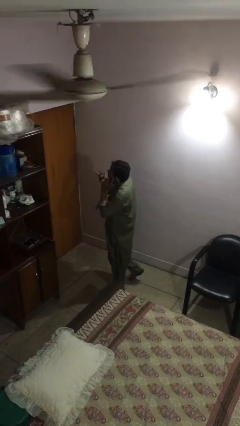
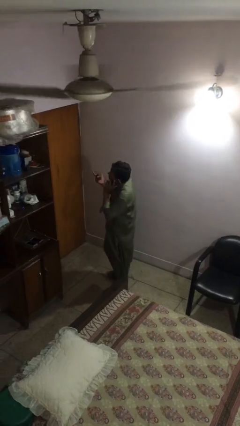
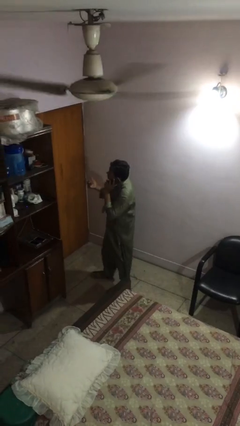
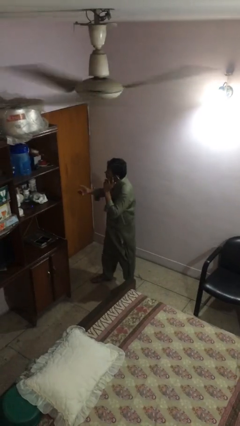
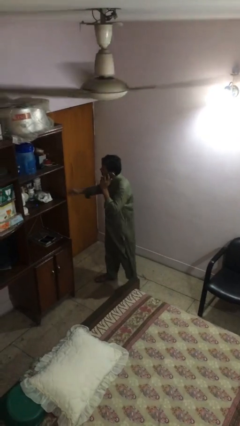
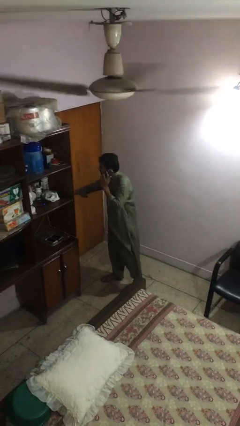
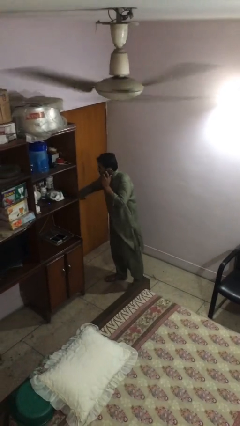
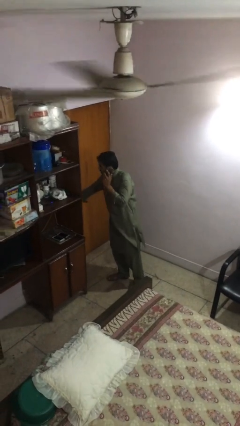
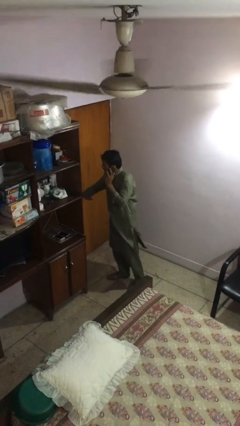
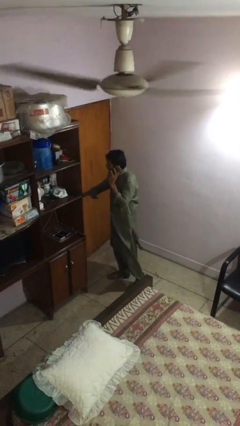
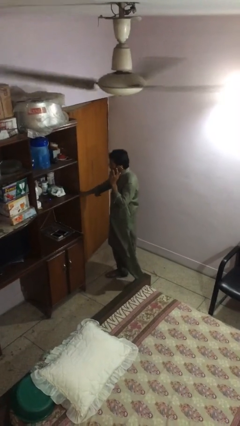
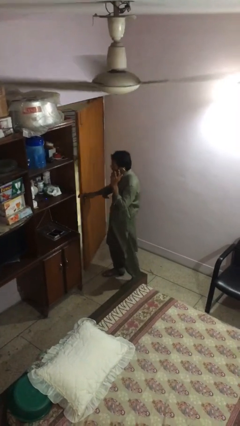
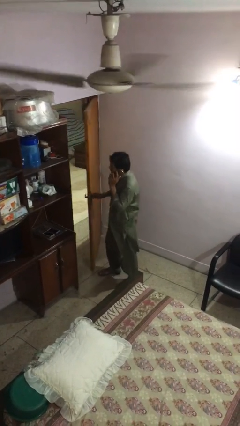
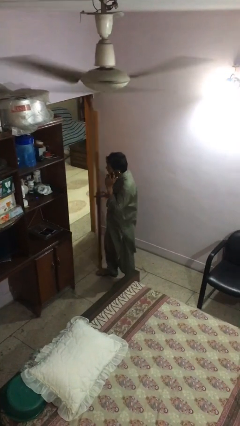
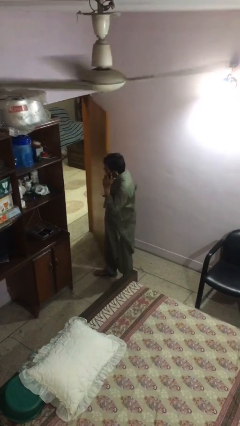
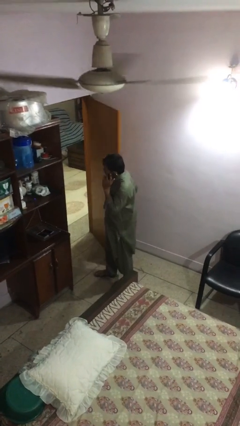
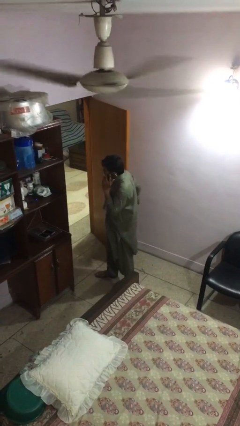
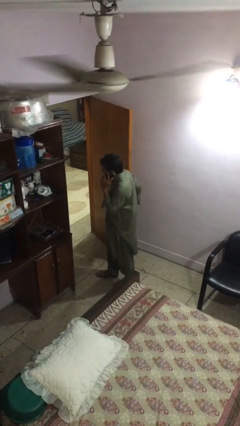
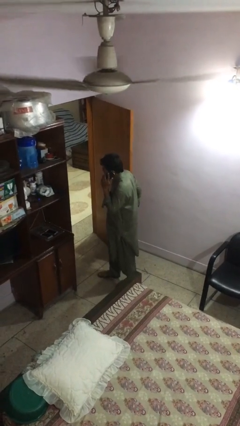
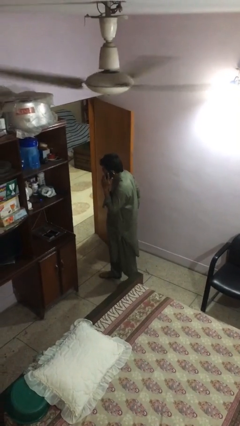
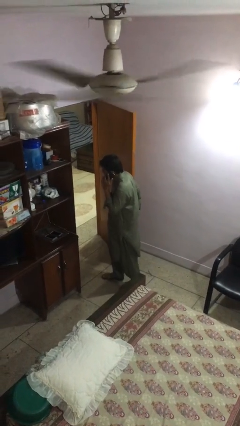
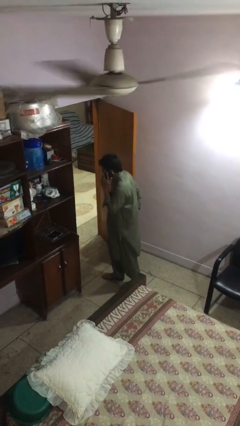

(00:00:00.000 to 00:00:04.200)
person opens facility door

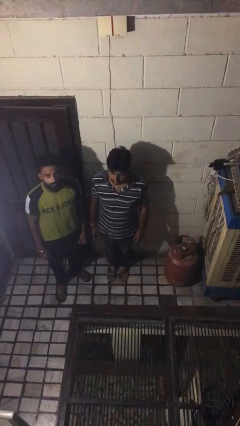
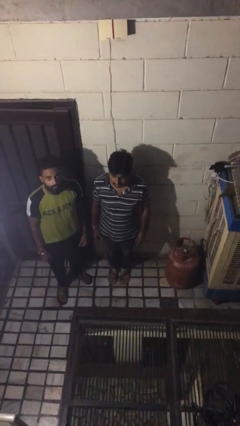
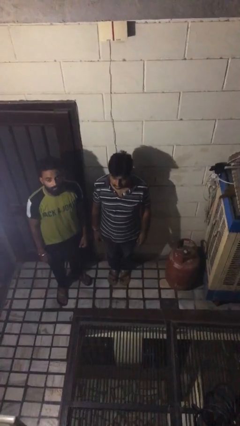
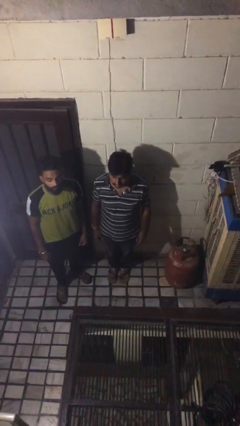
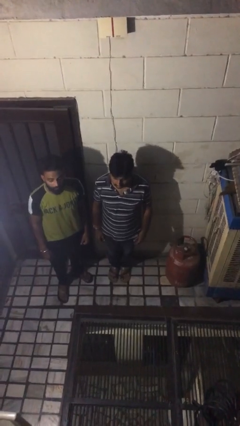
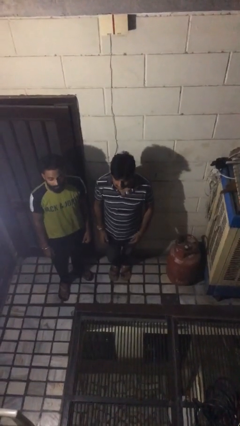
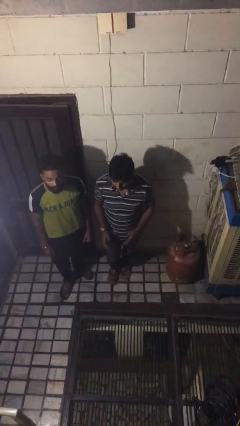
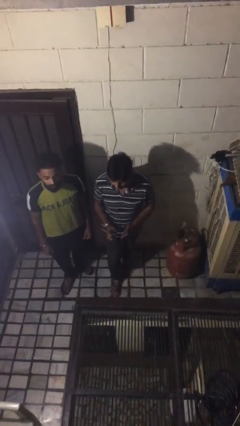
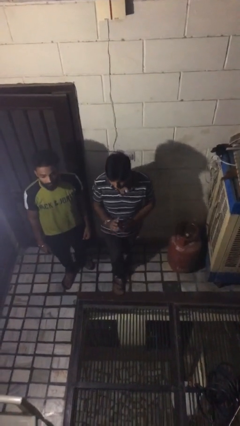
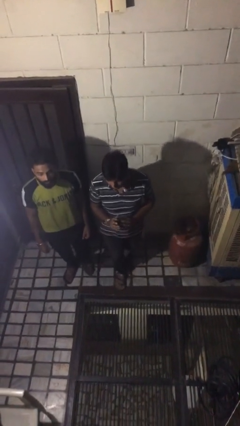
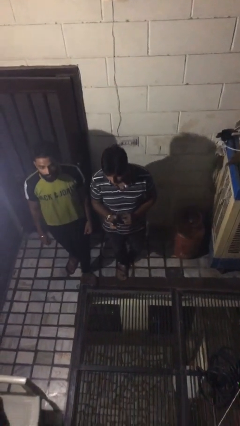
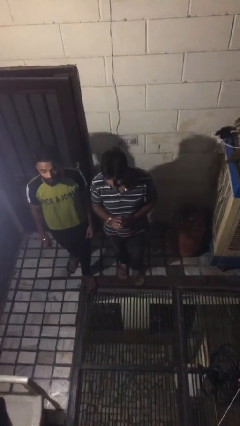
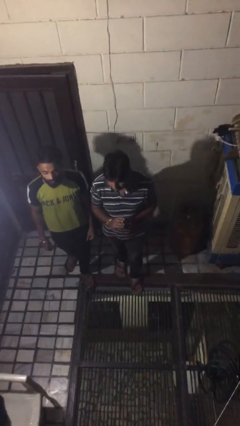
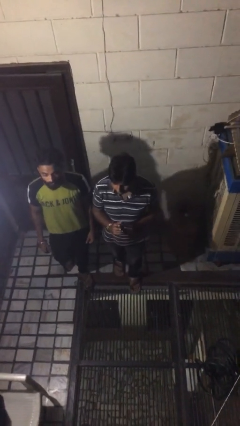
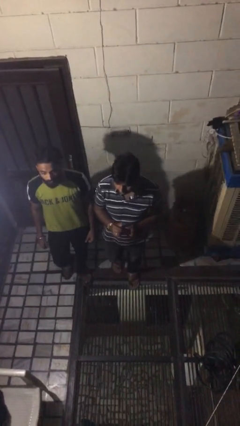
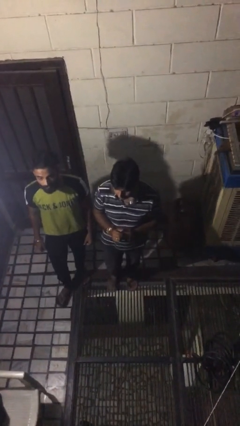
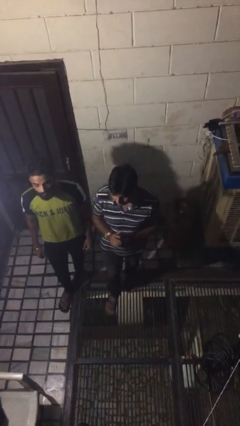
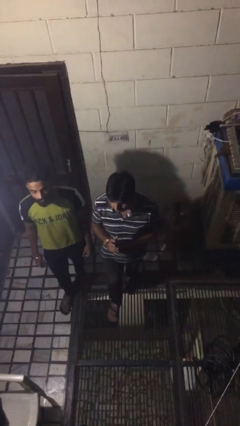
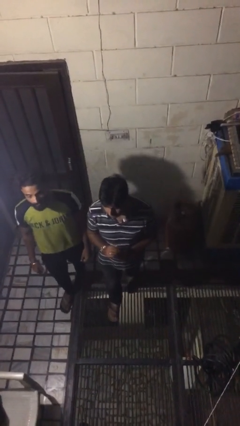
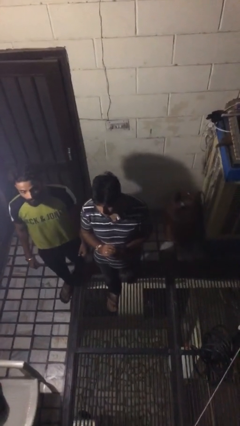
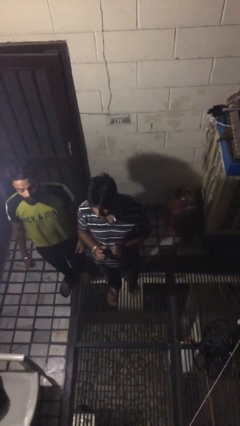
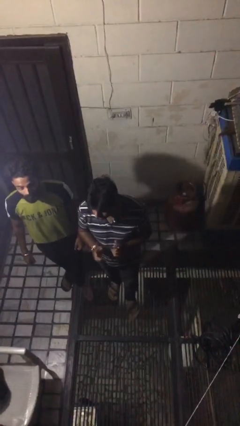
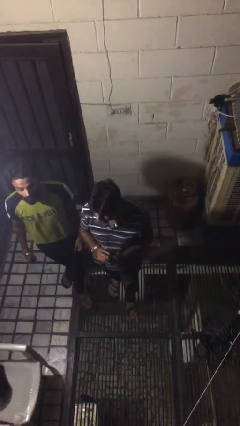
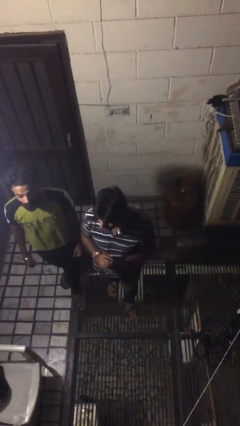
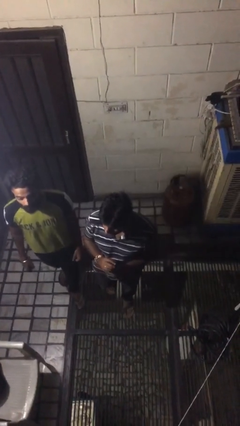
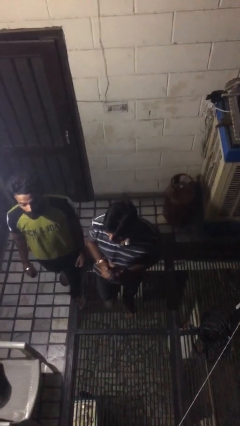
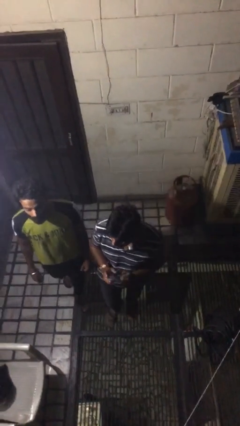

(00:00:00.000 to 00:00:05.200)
person talks to person

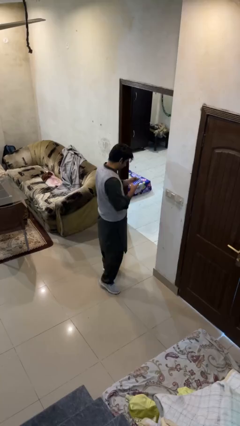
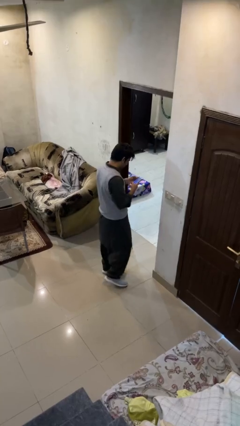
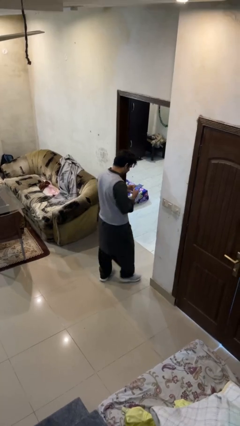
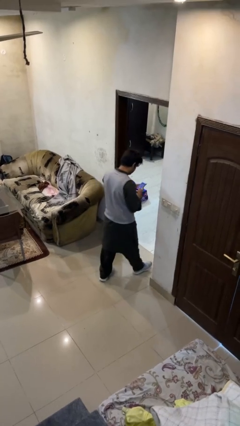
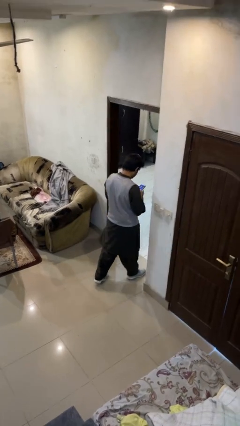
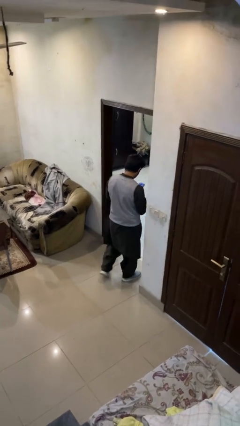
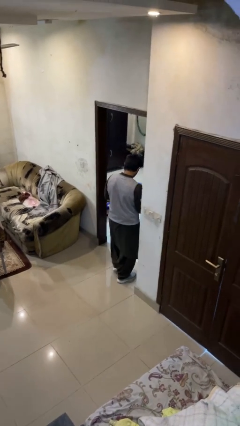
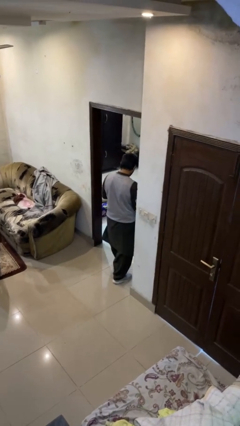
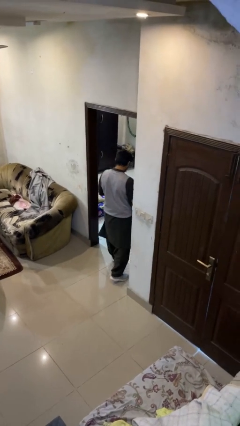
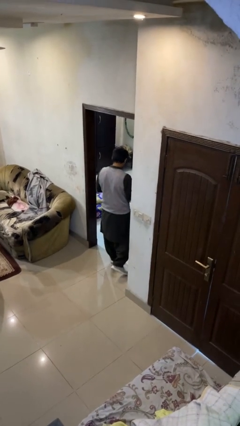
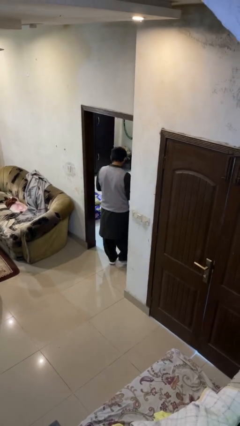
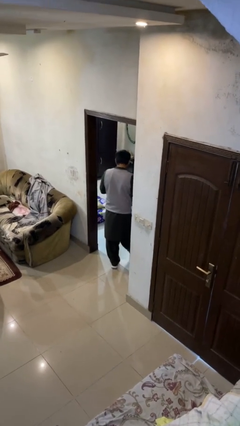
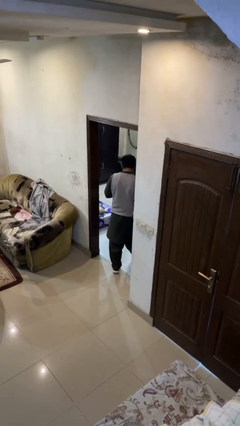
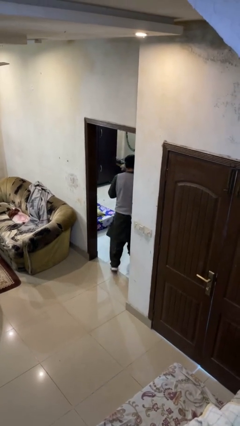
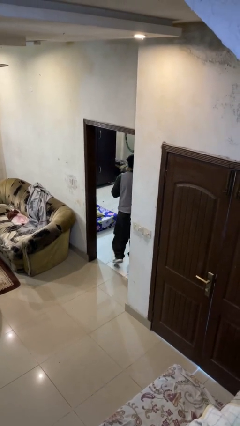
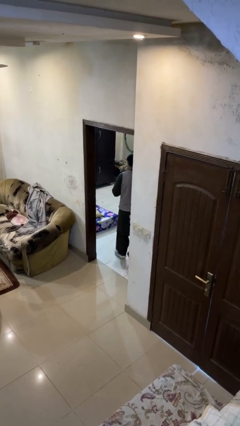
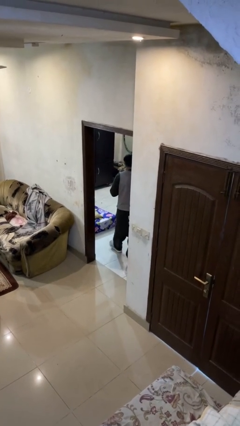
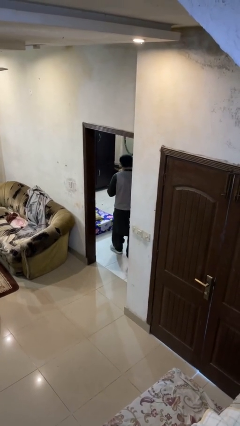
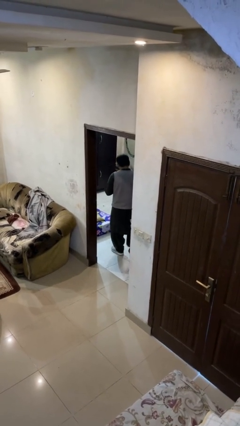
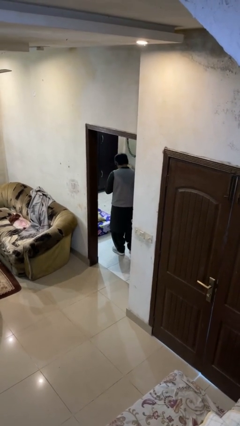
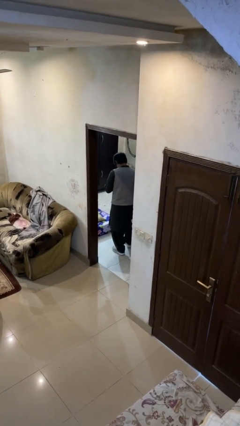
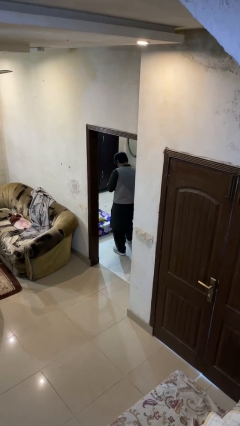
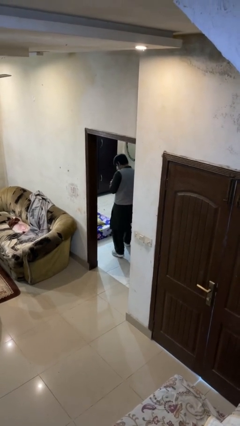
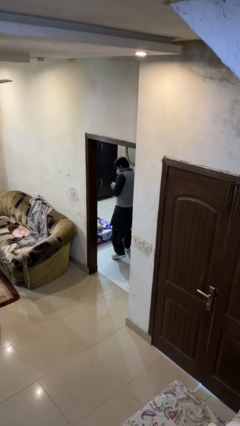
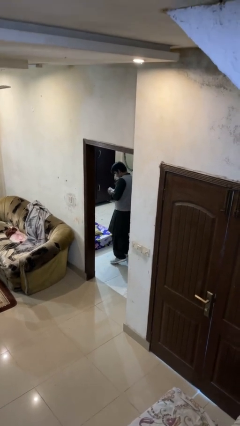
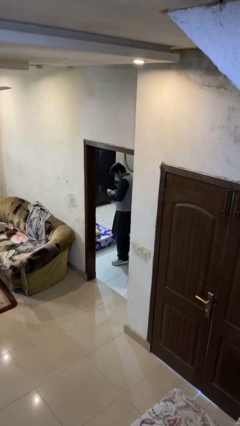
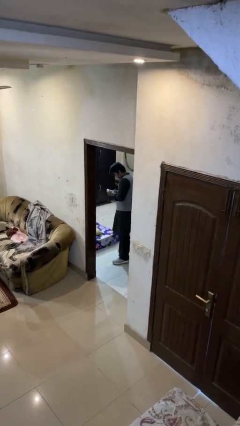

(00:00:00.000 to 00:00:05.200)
person exits scene through structure

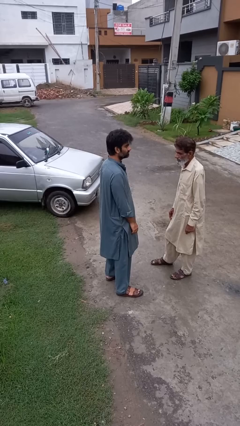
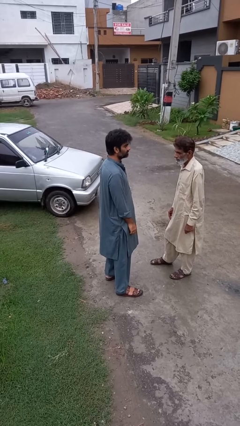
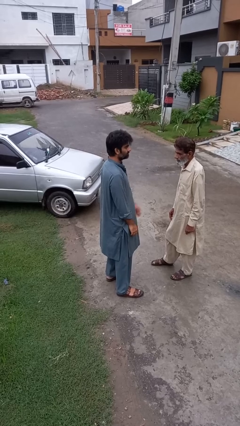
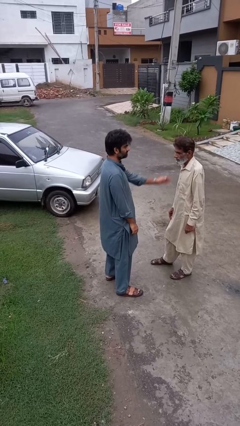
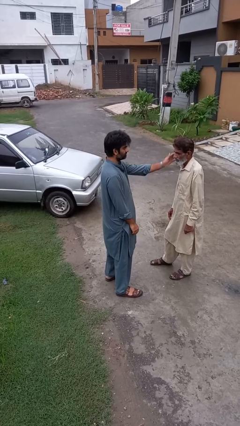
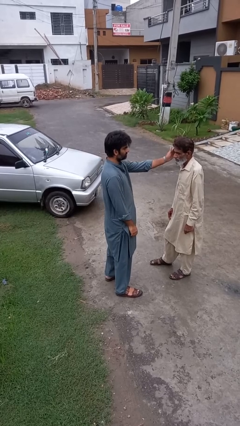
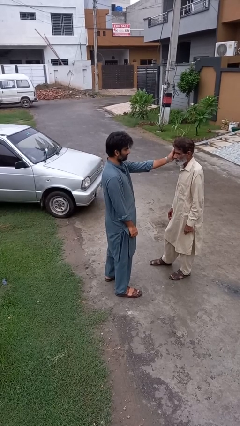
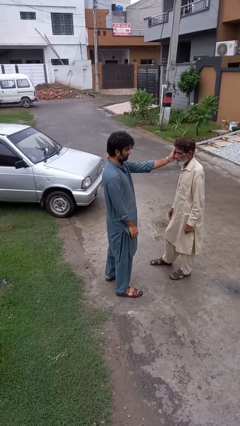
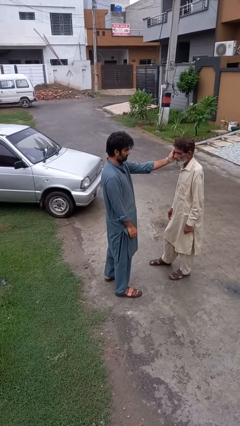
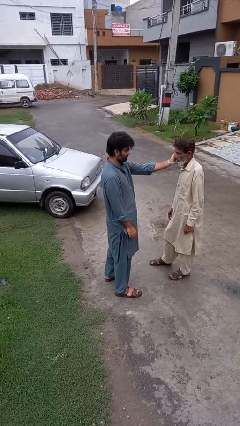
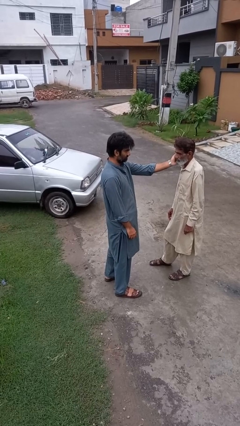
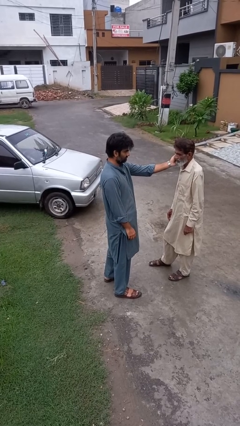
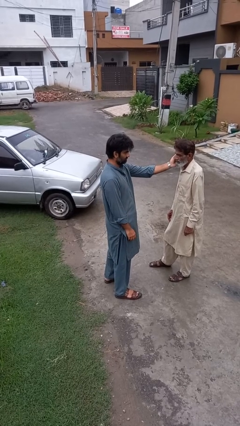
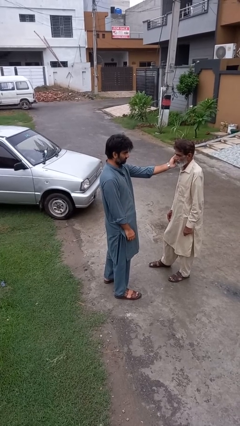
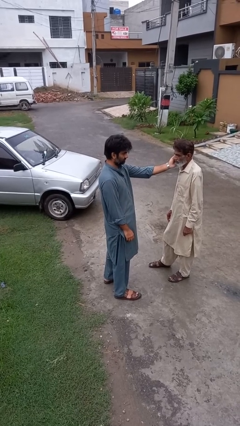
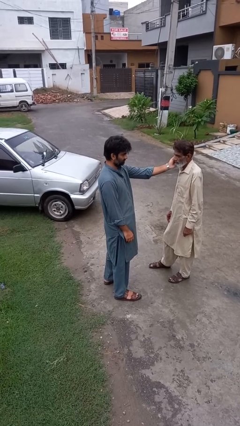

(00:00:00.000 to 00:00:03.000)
person touches face of person
